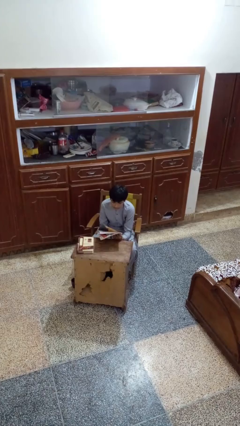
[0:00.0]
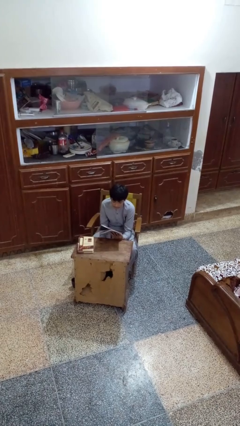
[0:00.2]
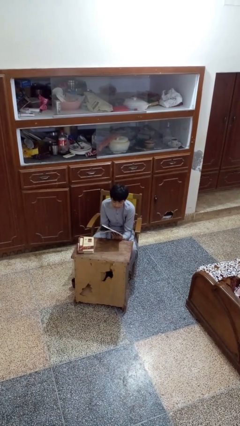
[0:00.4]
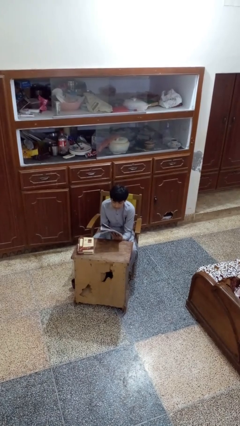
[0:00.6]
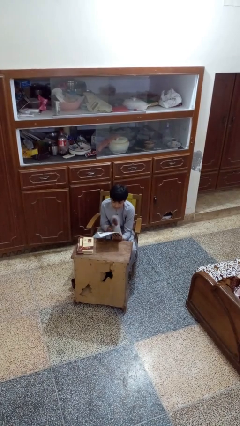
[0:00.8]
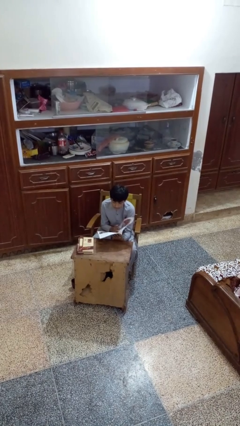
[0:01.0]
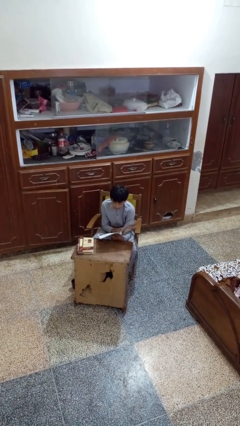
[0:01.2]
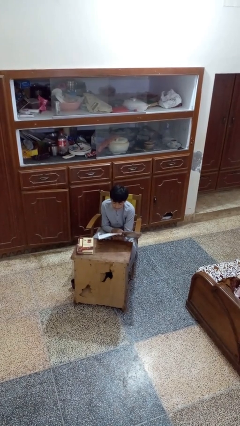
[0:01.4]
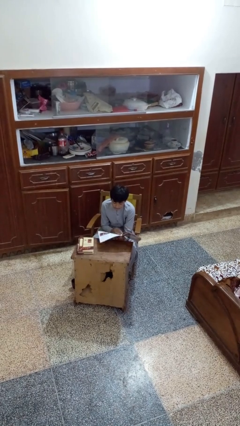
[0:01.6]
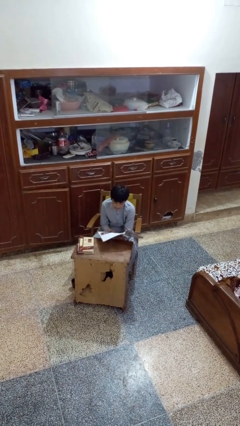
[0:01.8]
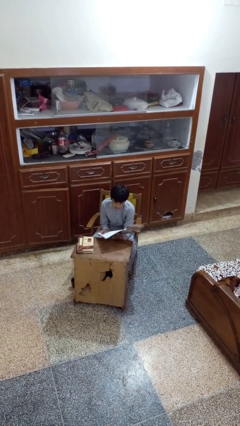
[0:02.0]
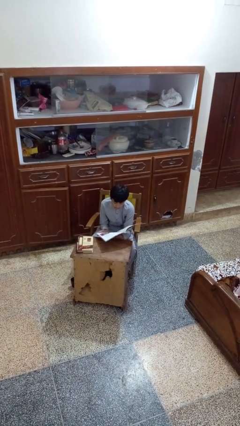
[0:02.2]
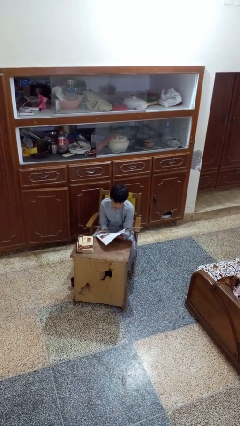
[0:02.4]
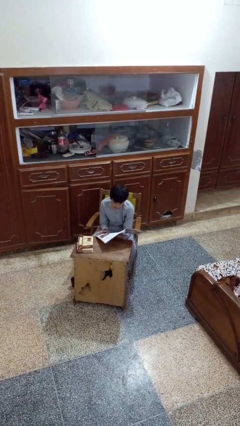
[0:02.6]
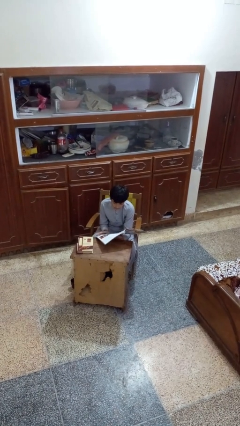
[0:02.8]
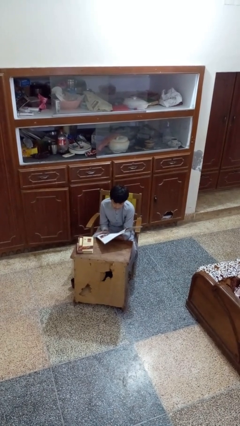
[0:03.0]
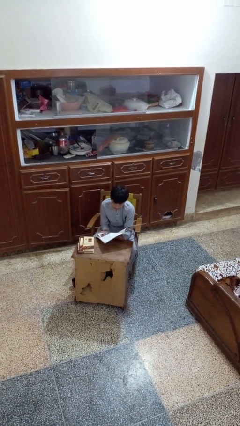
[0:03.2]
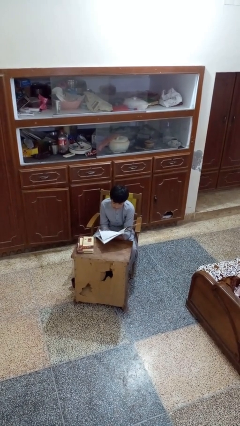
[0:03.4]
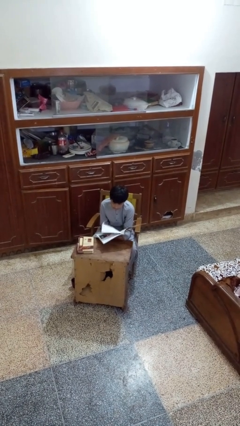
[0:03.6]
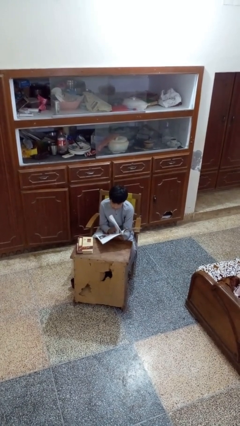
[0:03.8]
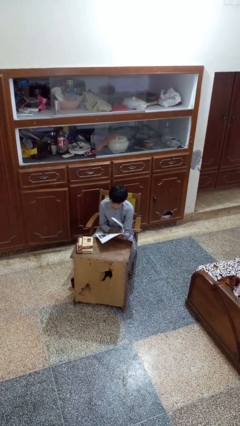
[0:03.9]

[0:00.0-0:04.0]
person reads magazine

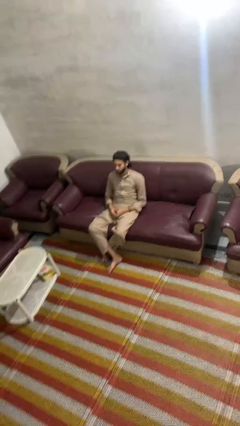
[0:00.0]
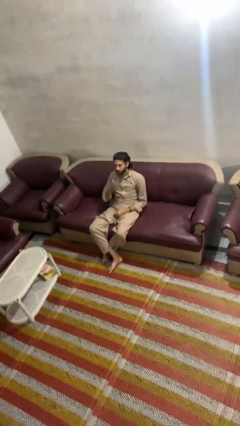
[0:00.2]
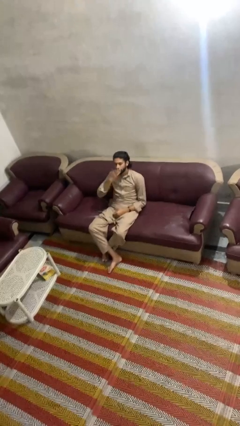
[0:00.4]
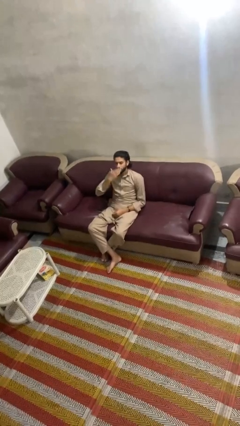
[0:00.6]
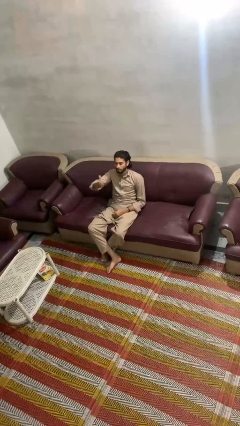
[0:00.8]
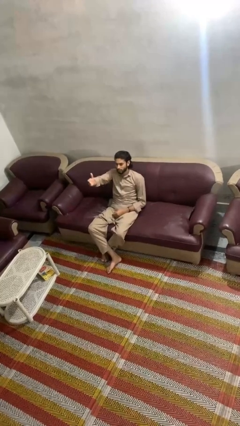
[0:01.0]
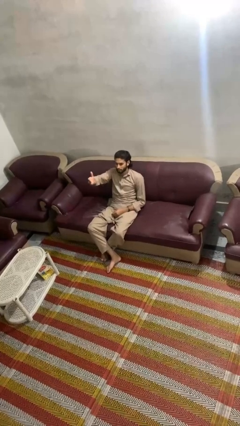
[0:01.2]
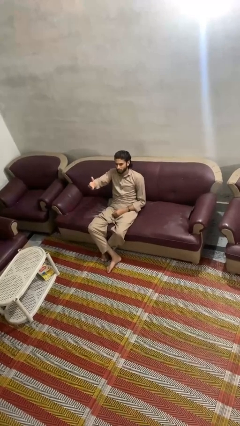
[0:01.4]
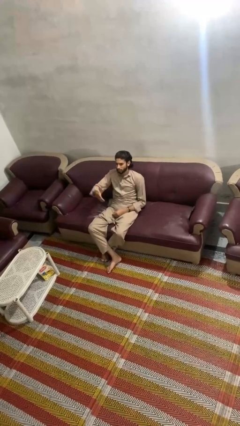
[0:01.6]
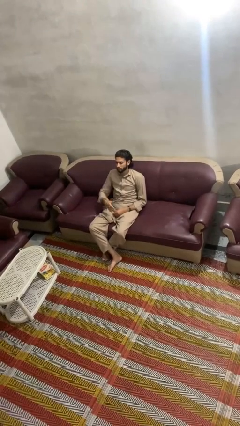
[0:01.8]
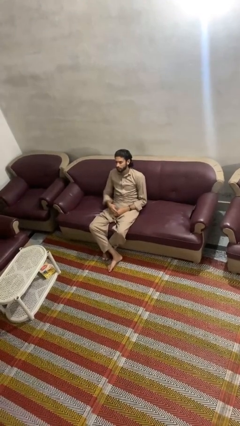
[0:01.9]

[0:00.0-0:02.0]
person gestures blow kiss

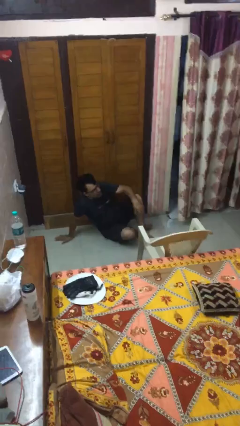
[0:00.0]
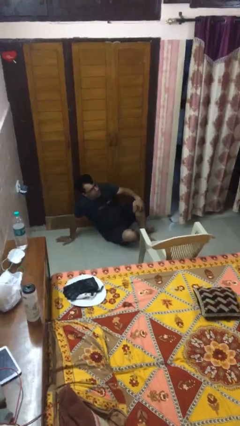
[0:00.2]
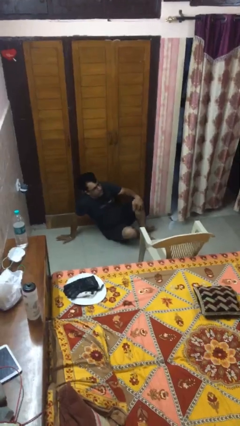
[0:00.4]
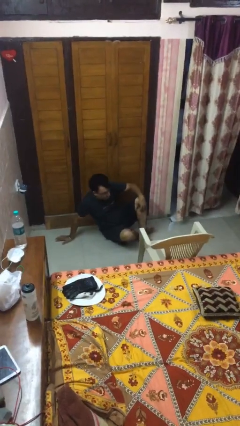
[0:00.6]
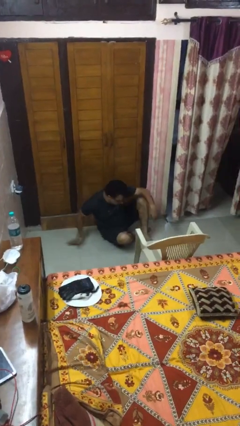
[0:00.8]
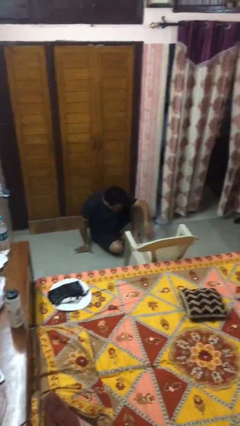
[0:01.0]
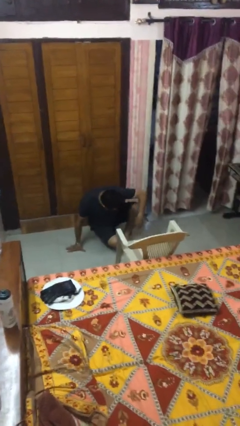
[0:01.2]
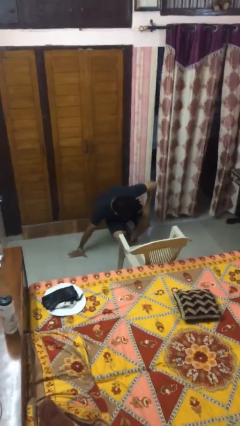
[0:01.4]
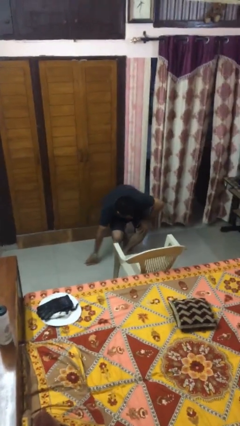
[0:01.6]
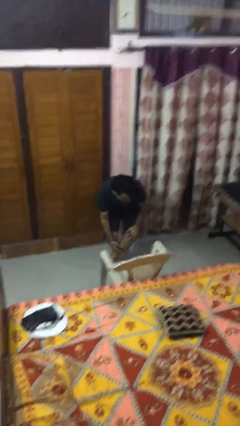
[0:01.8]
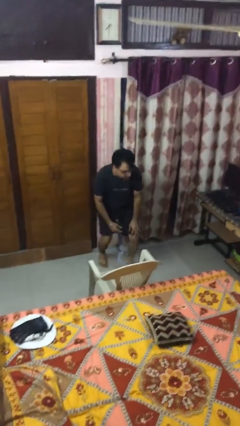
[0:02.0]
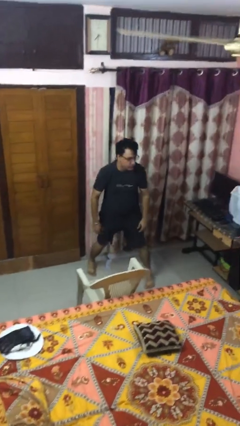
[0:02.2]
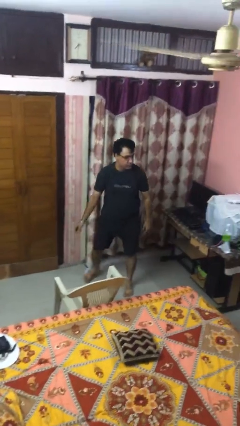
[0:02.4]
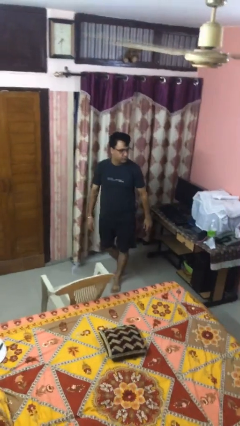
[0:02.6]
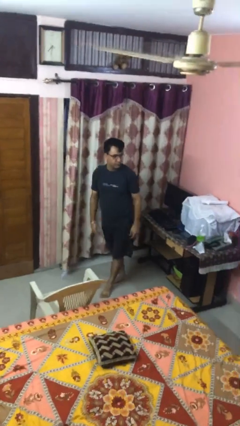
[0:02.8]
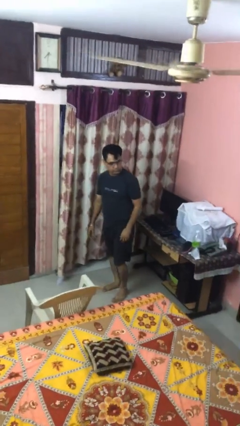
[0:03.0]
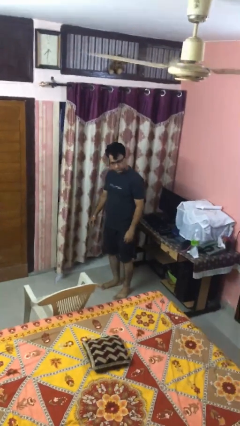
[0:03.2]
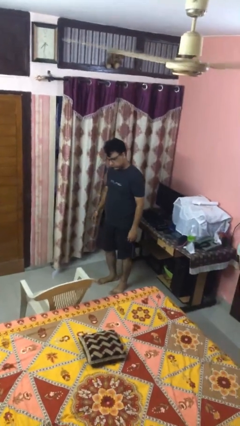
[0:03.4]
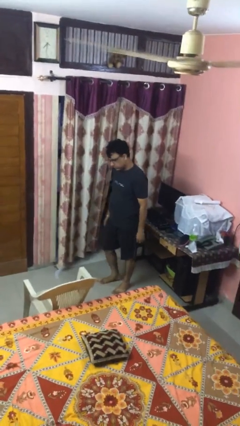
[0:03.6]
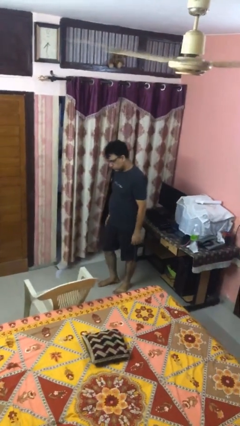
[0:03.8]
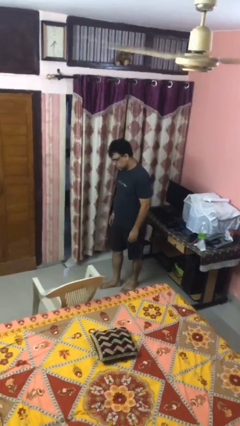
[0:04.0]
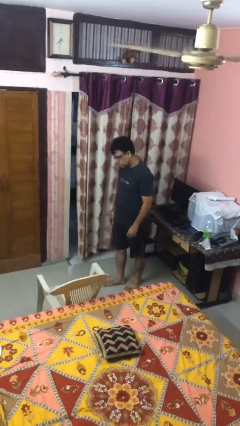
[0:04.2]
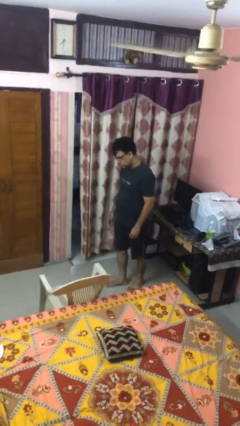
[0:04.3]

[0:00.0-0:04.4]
person stands up from floor

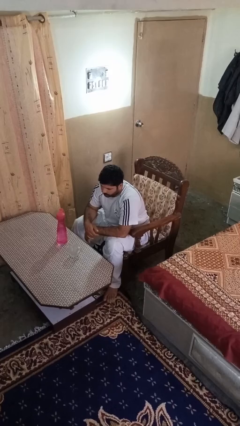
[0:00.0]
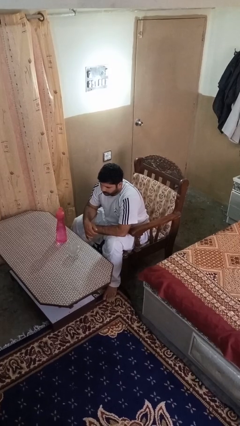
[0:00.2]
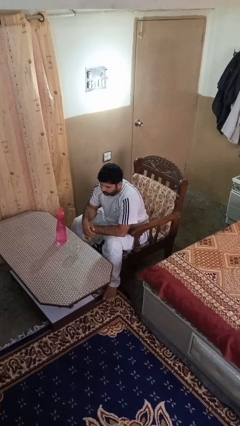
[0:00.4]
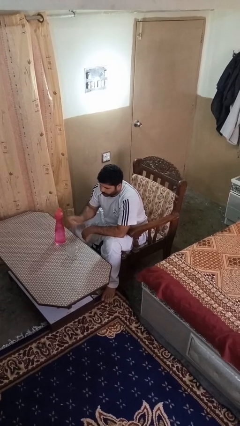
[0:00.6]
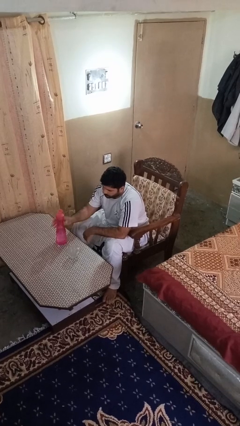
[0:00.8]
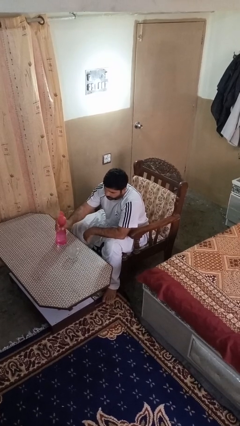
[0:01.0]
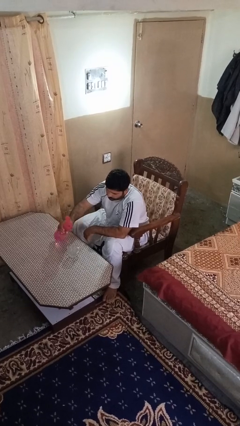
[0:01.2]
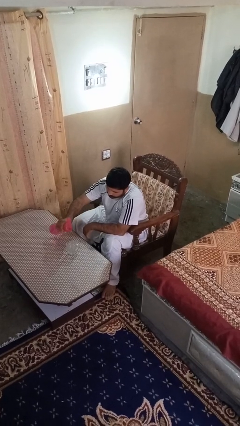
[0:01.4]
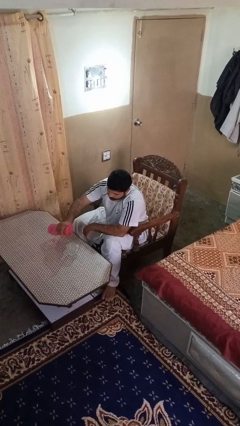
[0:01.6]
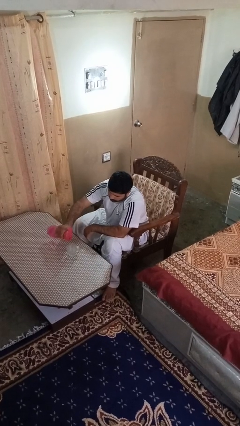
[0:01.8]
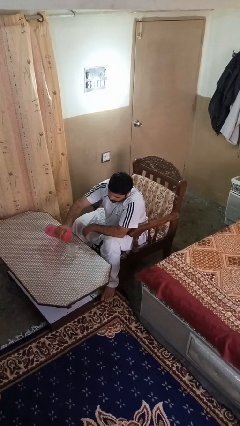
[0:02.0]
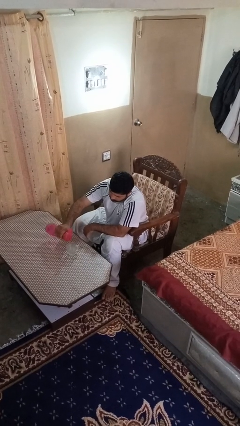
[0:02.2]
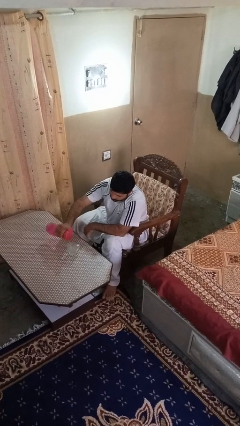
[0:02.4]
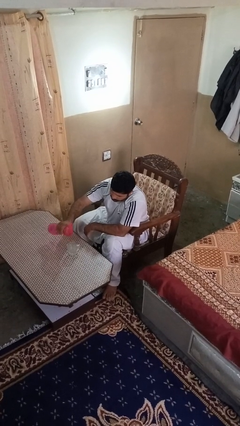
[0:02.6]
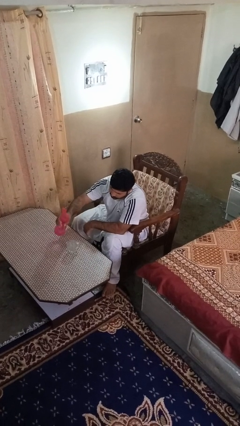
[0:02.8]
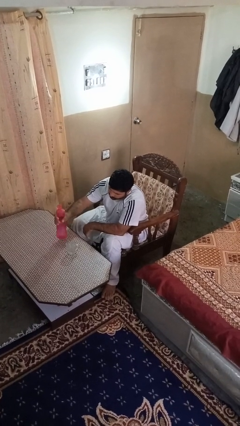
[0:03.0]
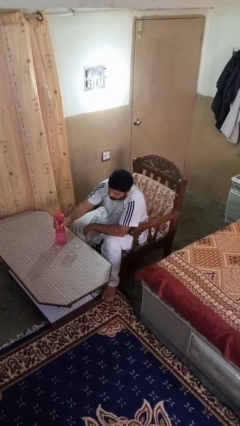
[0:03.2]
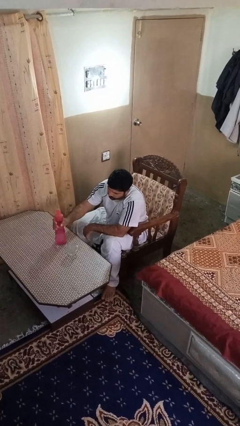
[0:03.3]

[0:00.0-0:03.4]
person pours liquid into cup

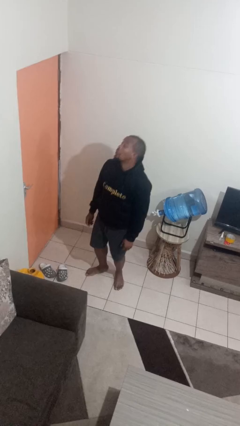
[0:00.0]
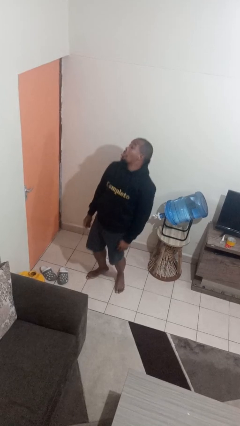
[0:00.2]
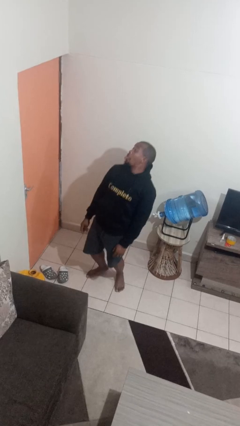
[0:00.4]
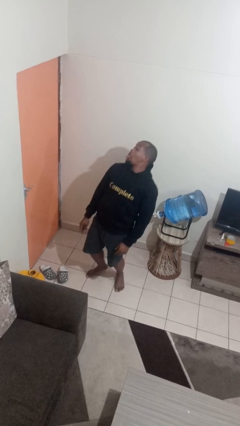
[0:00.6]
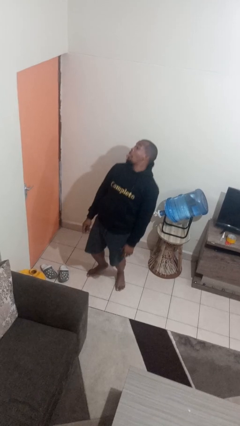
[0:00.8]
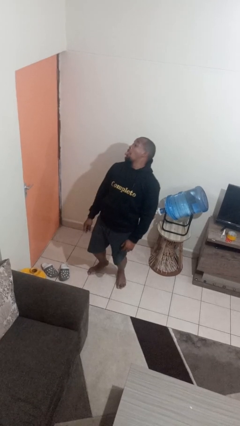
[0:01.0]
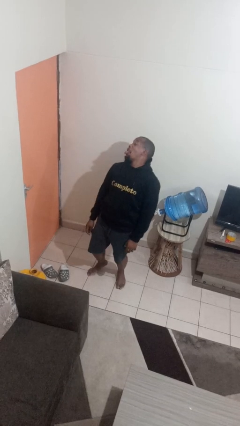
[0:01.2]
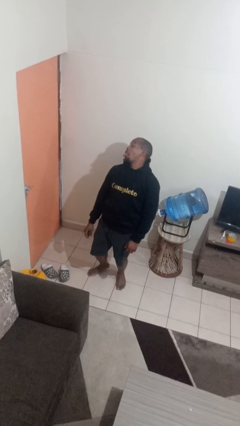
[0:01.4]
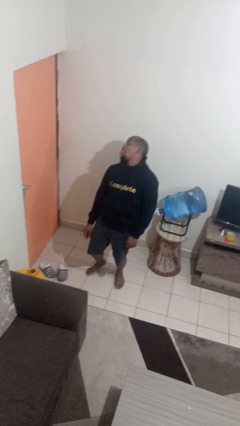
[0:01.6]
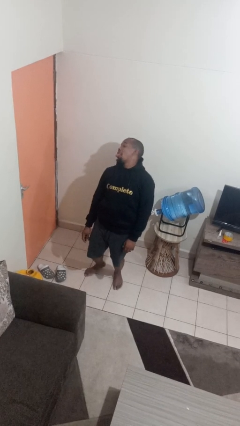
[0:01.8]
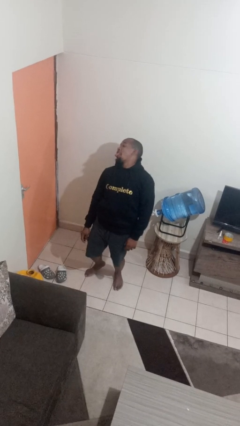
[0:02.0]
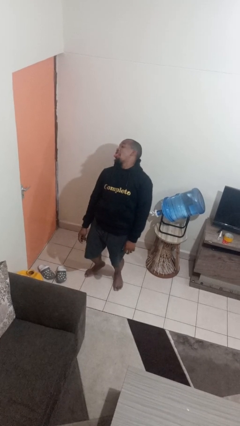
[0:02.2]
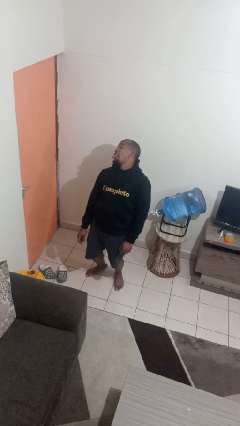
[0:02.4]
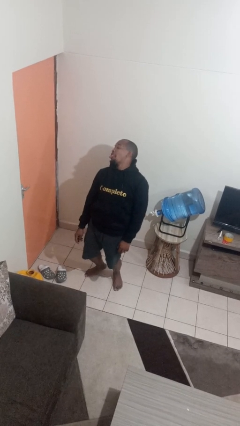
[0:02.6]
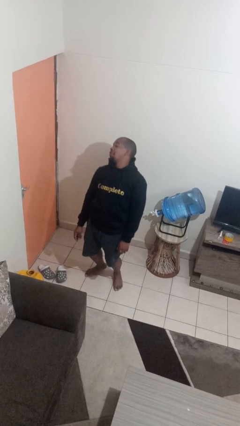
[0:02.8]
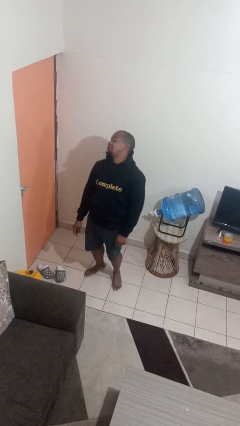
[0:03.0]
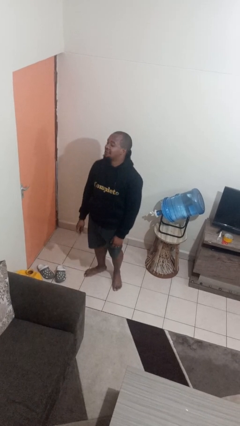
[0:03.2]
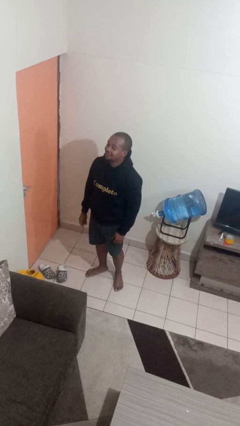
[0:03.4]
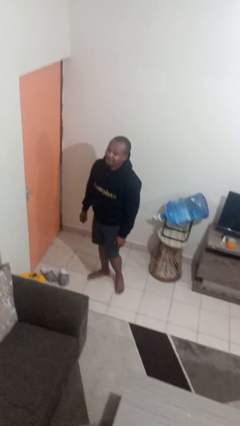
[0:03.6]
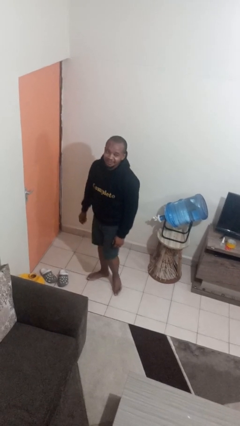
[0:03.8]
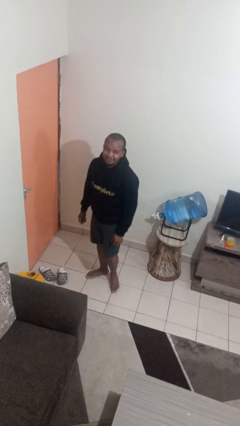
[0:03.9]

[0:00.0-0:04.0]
person sticks out tongue
